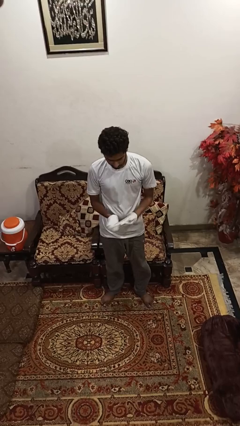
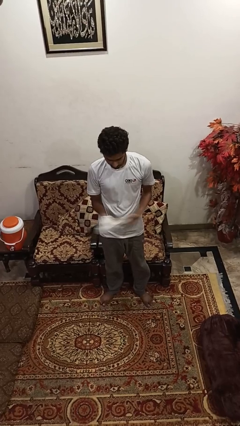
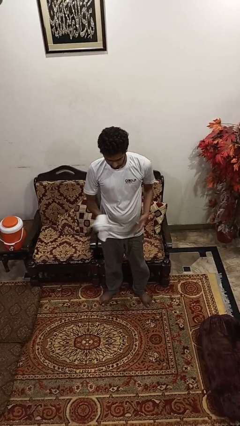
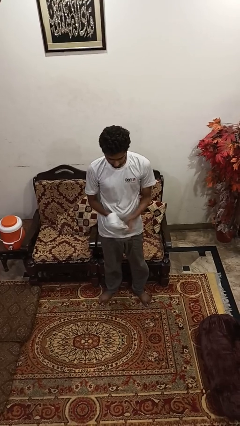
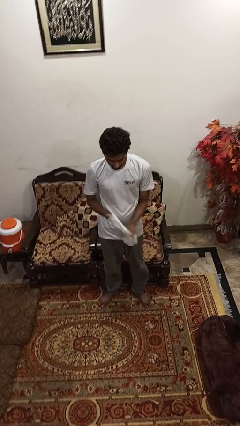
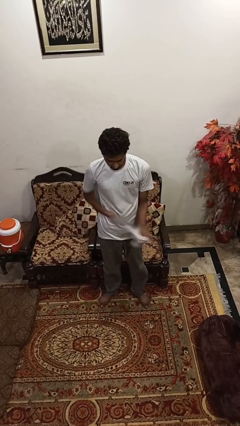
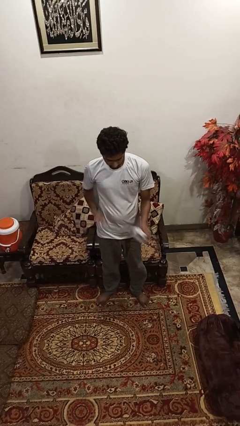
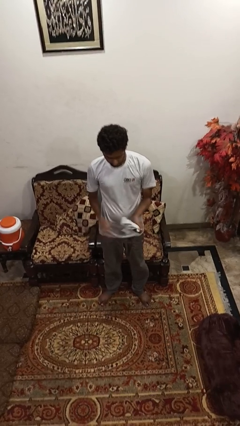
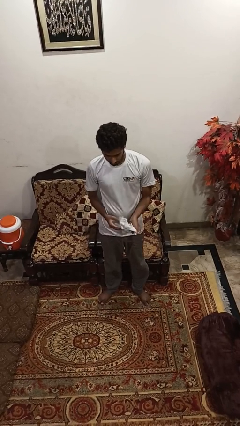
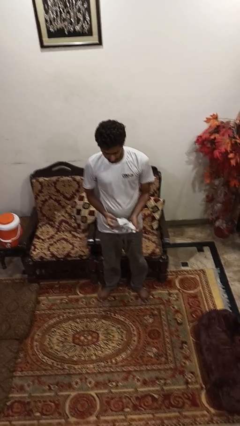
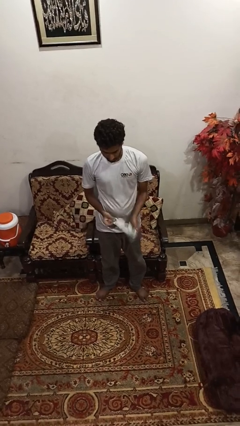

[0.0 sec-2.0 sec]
person takes off gloves

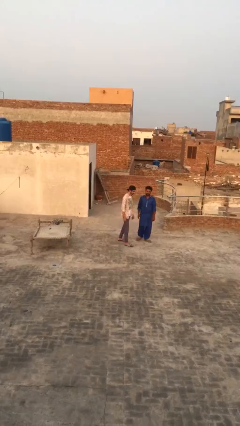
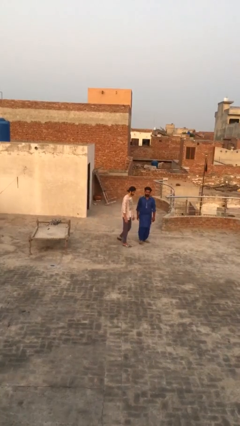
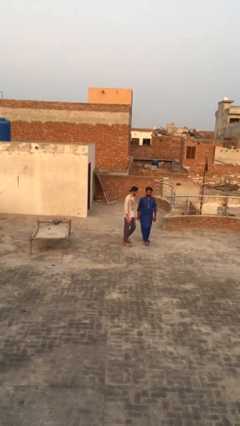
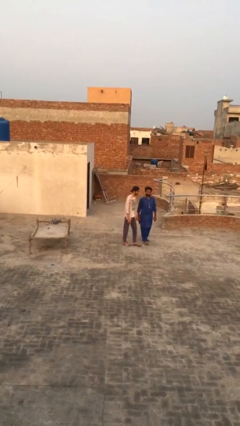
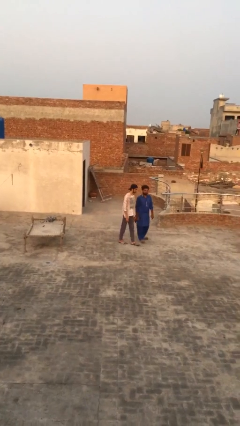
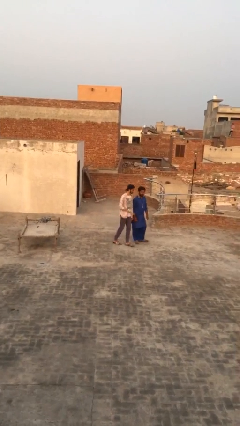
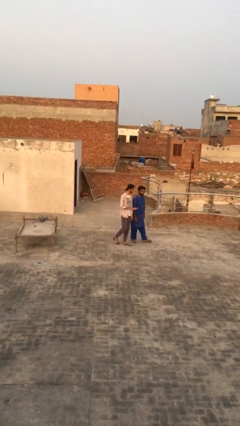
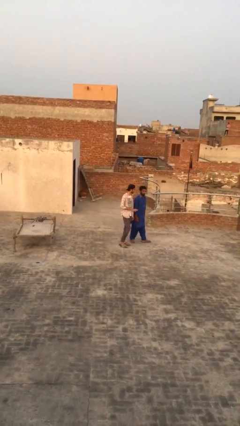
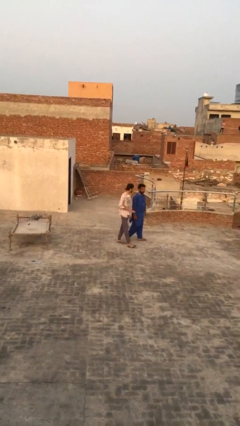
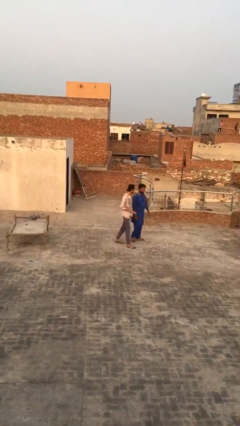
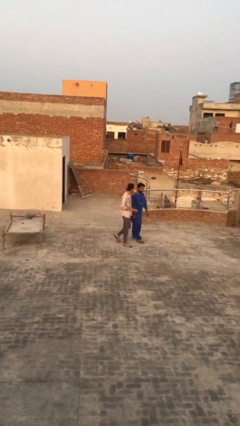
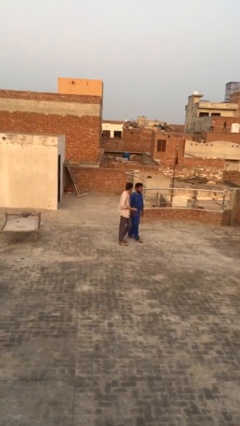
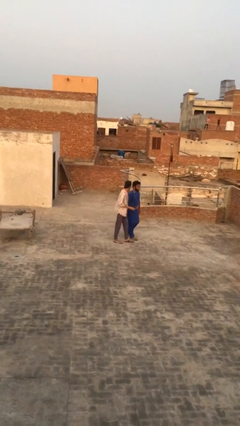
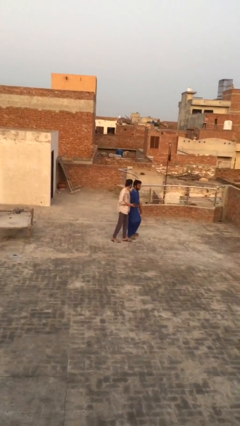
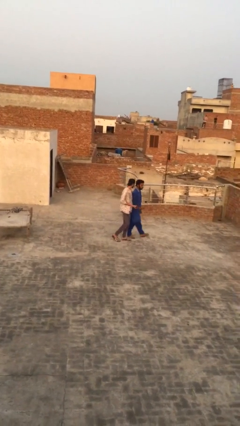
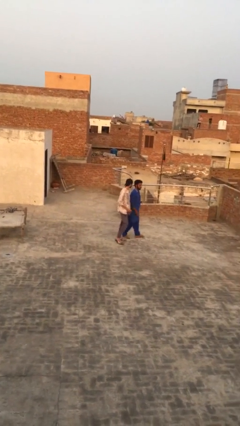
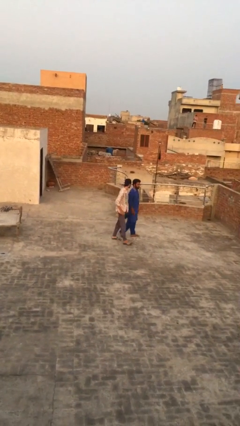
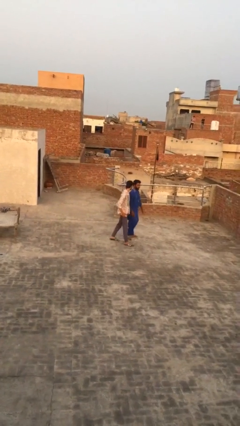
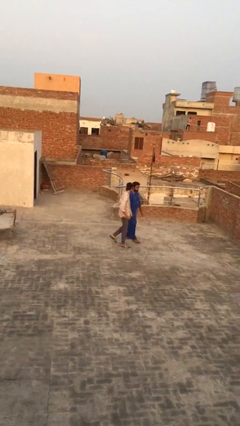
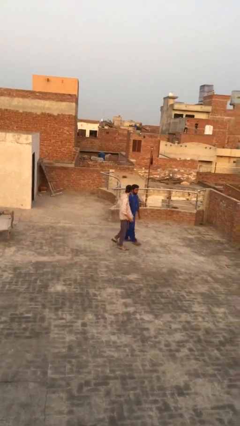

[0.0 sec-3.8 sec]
person talks to person

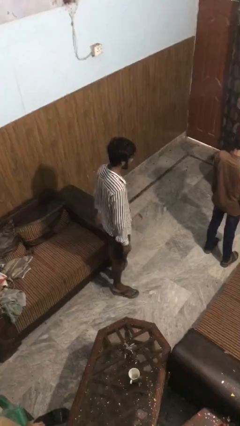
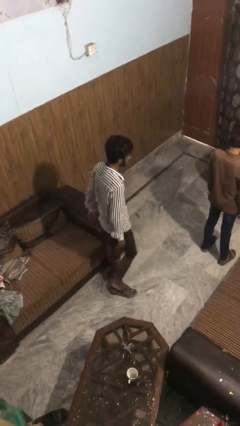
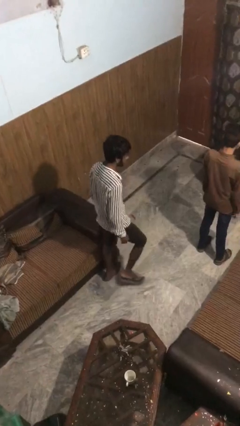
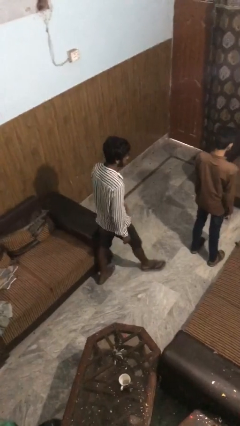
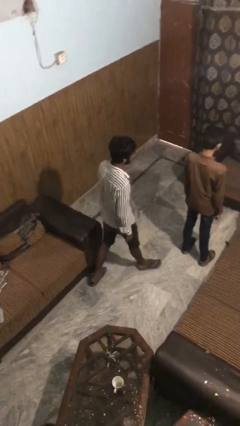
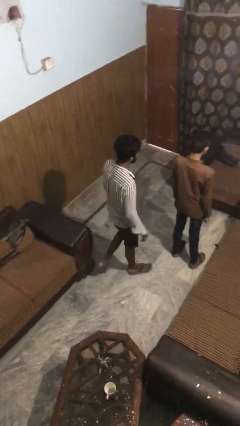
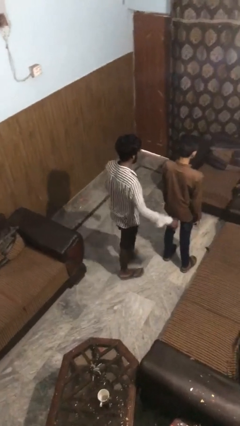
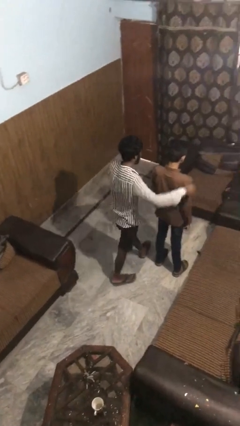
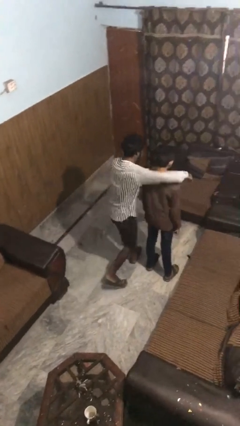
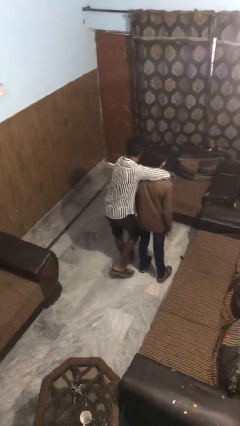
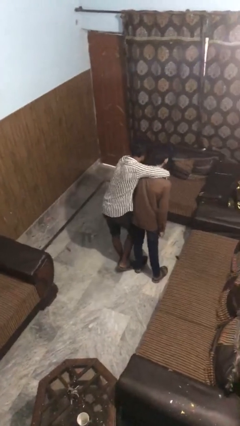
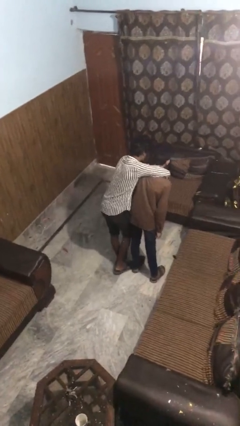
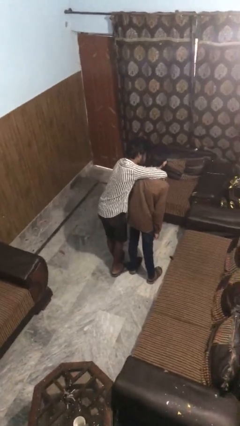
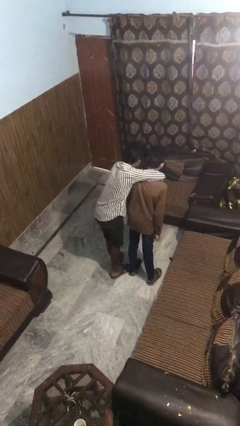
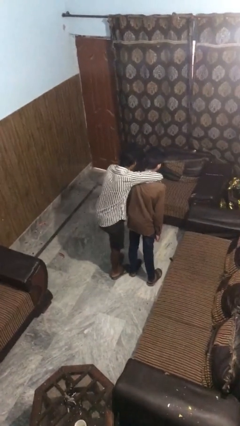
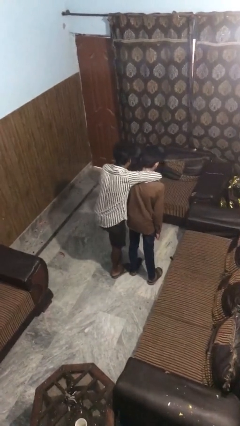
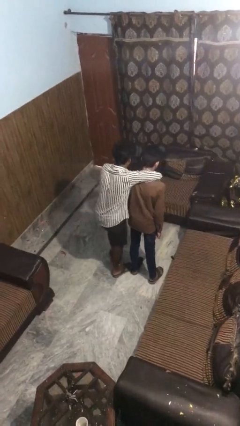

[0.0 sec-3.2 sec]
person hugs person from behind

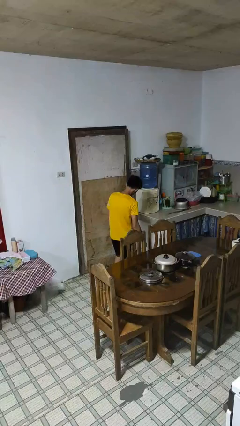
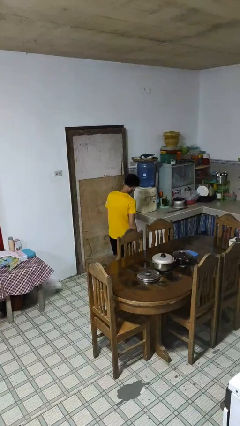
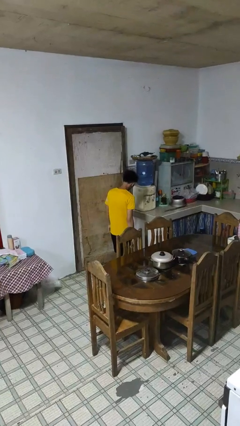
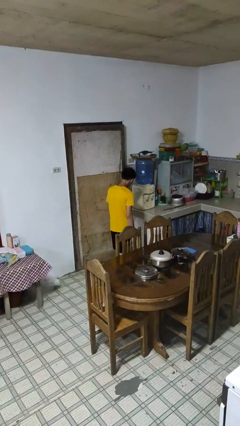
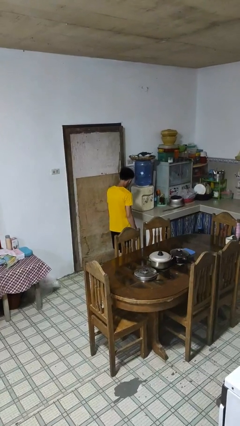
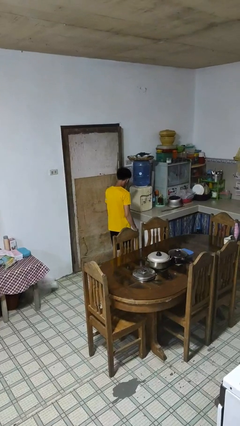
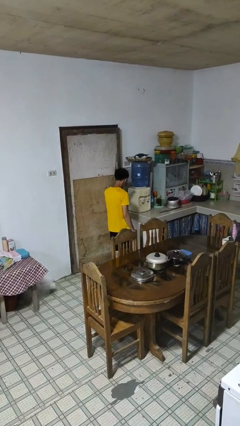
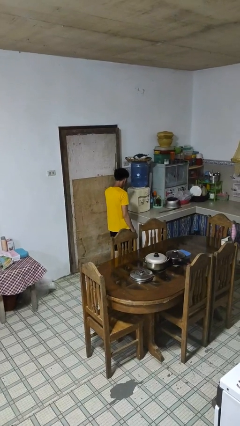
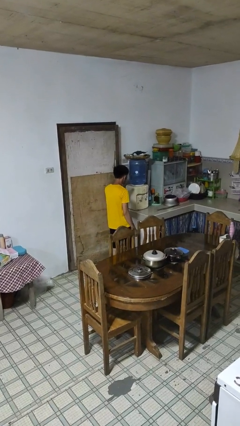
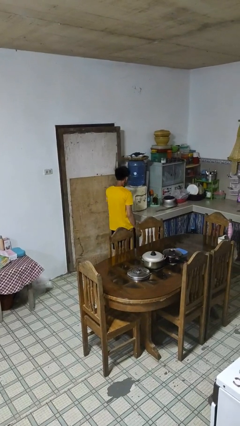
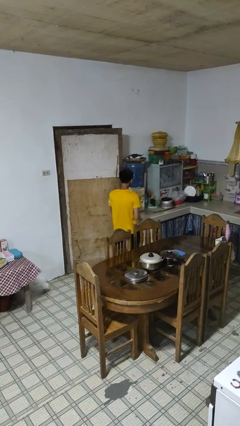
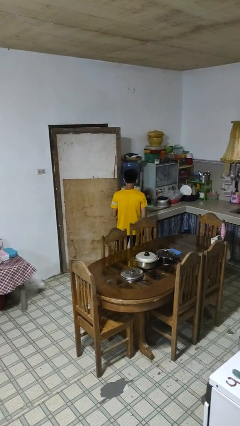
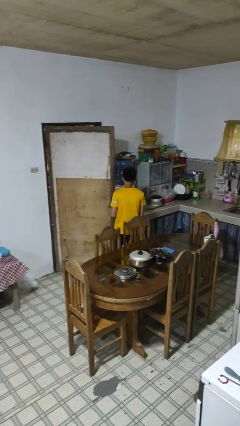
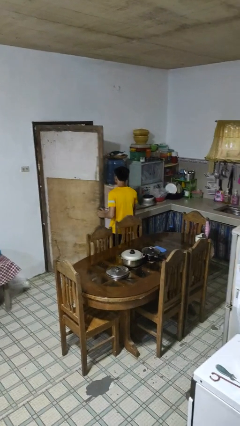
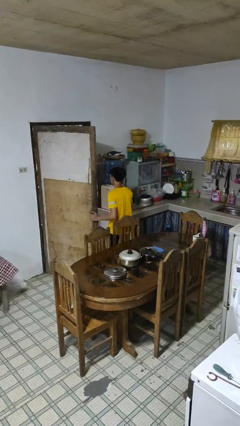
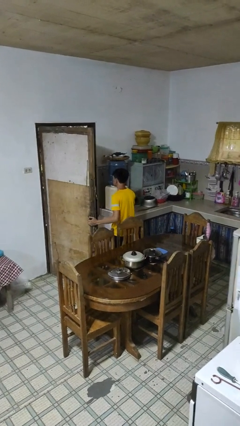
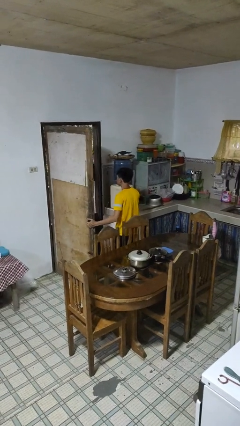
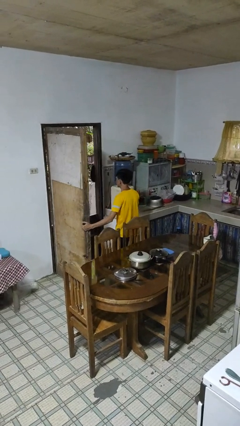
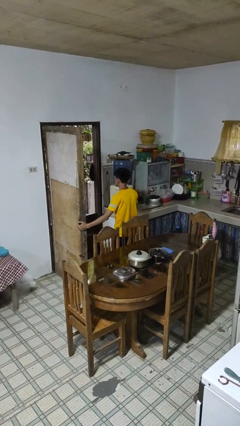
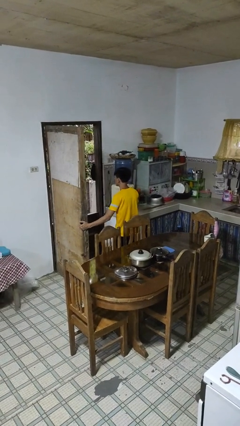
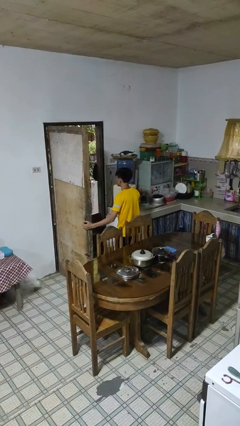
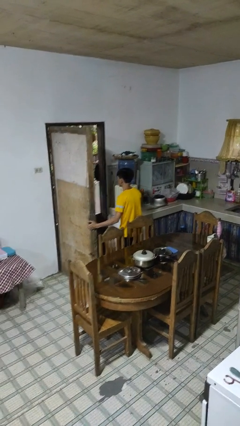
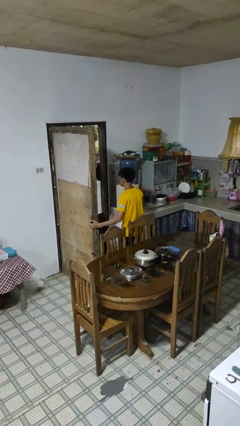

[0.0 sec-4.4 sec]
person opens facility door

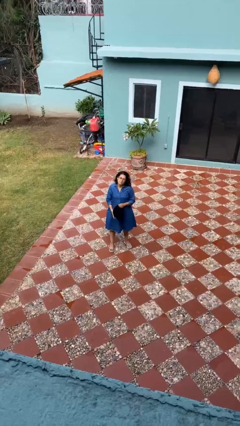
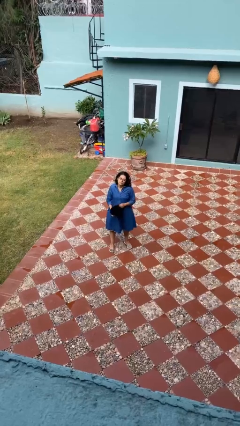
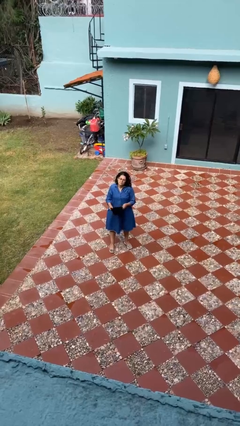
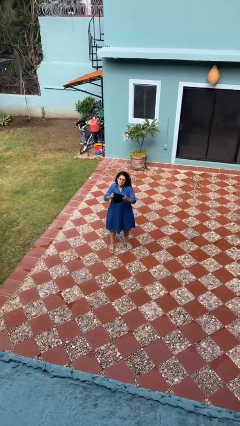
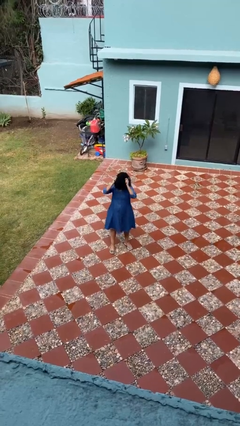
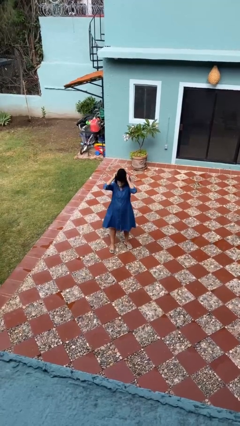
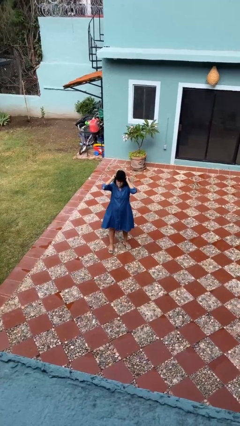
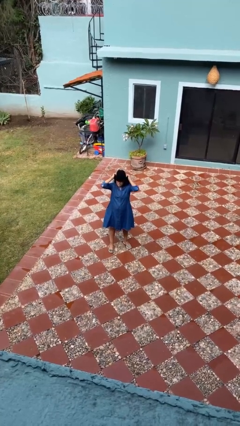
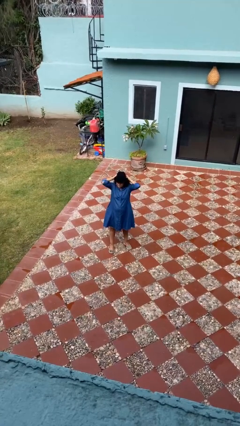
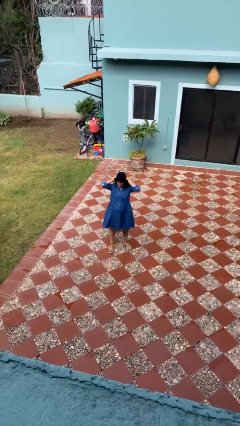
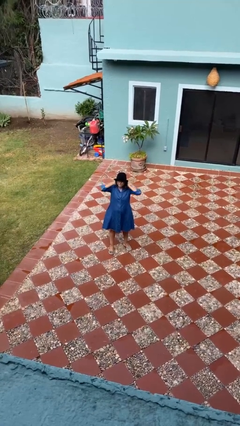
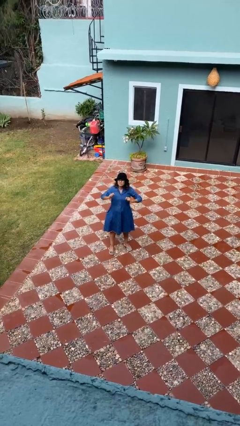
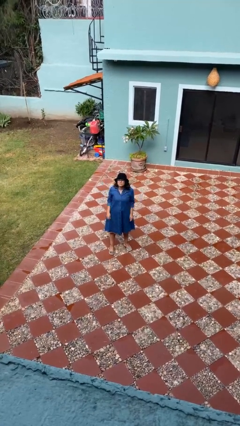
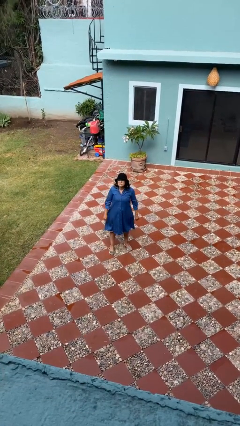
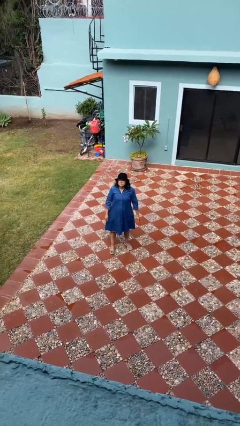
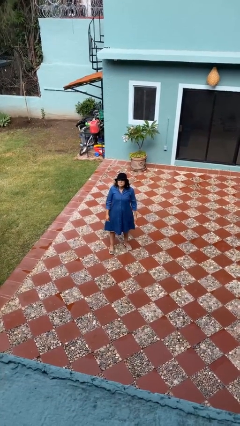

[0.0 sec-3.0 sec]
person puts on hat

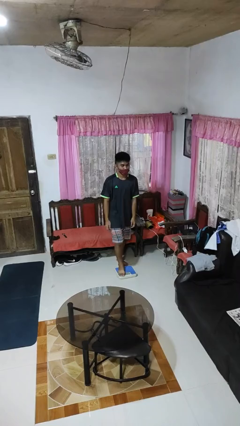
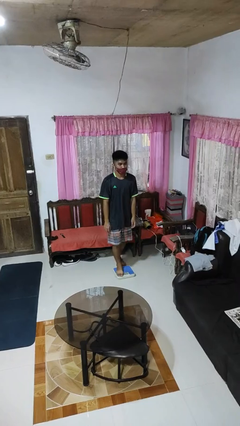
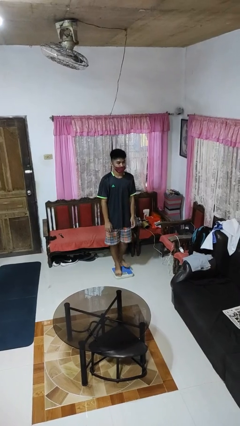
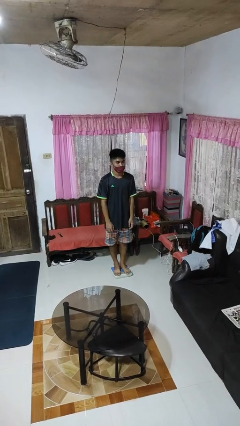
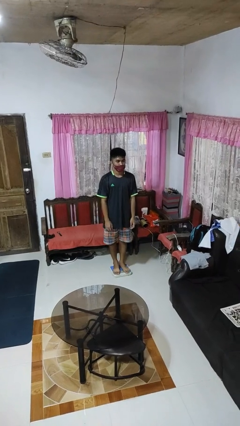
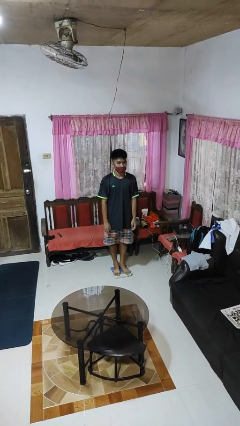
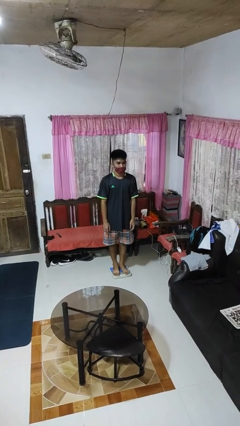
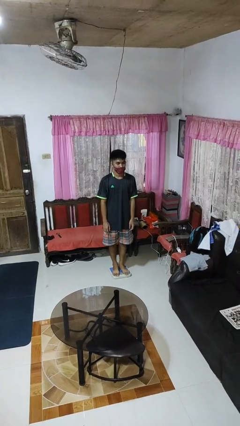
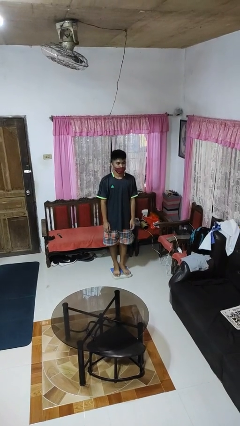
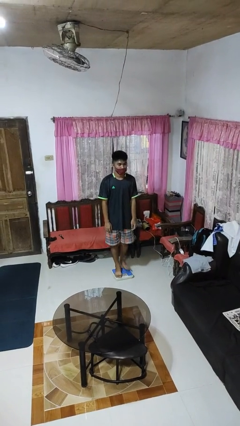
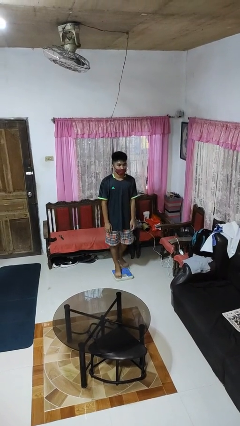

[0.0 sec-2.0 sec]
person uses bodyweight scale
